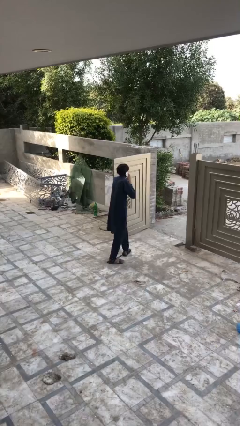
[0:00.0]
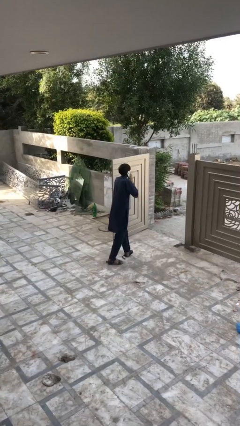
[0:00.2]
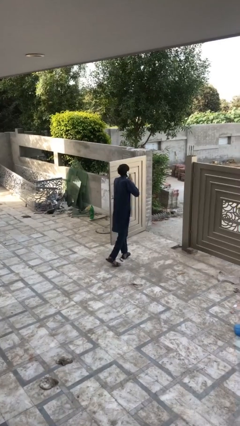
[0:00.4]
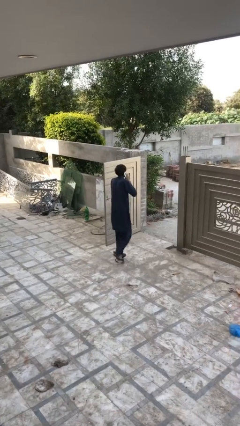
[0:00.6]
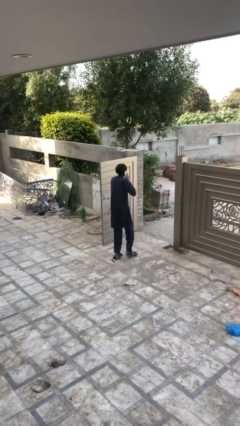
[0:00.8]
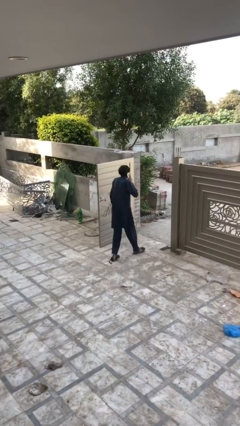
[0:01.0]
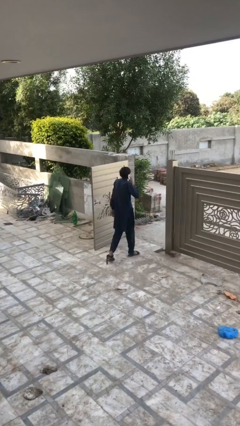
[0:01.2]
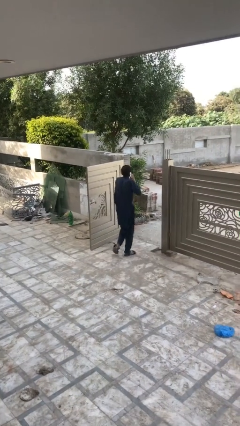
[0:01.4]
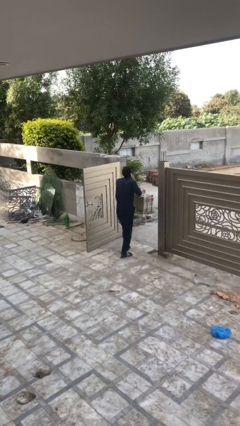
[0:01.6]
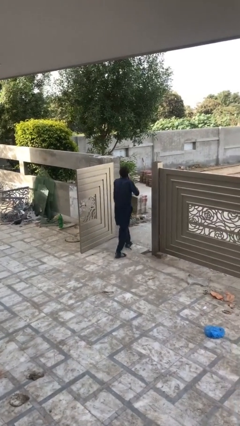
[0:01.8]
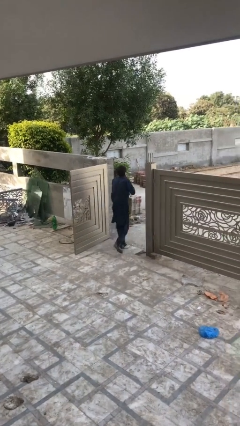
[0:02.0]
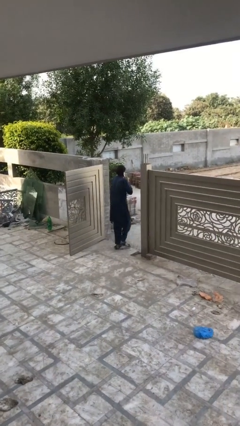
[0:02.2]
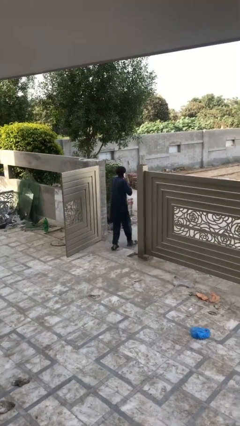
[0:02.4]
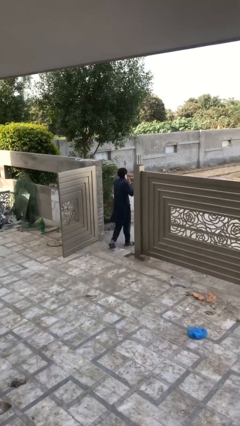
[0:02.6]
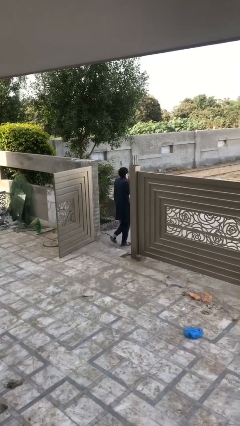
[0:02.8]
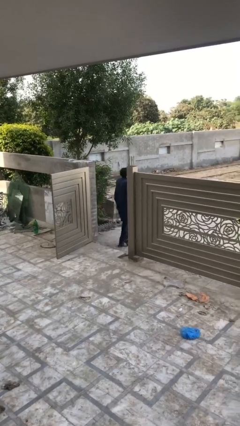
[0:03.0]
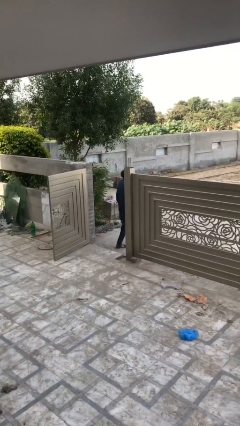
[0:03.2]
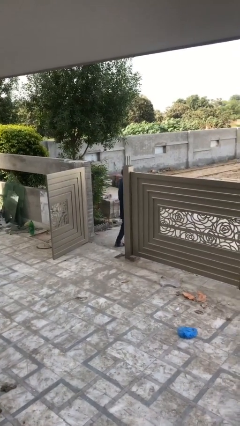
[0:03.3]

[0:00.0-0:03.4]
person exits scene through structure

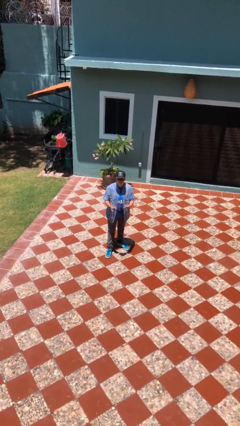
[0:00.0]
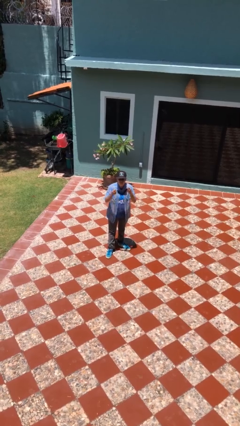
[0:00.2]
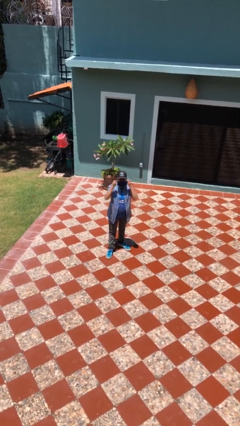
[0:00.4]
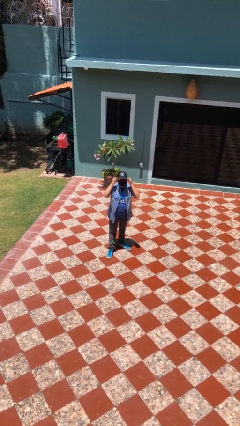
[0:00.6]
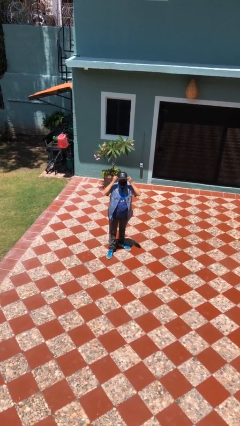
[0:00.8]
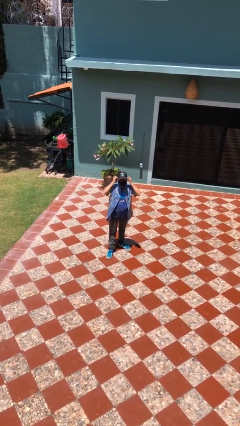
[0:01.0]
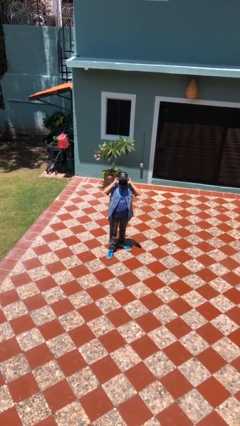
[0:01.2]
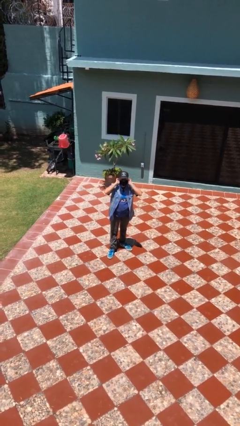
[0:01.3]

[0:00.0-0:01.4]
person puts on facemask

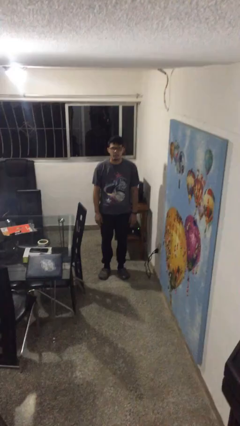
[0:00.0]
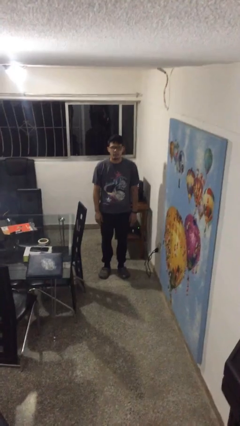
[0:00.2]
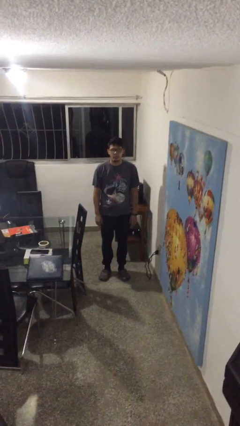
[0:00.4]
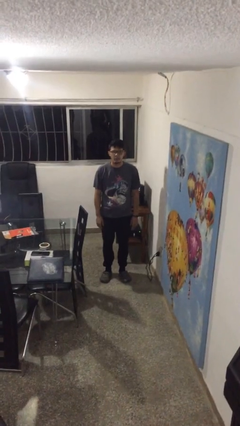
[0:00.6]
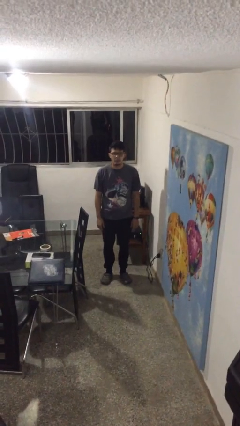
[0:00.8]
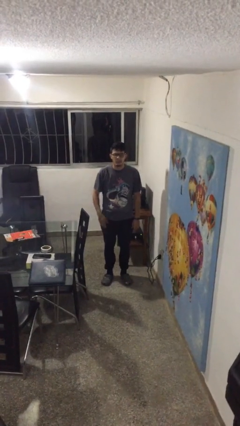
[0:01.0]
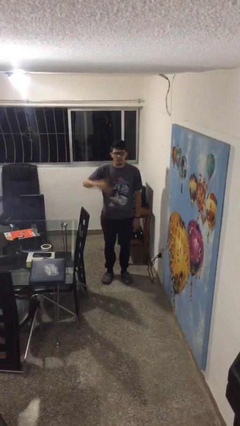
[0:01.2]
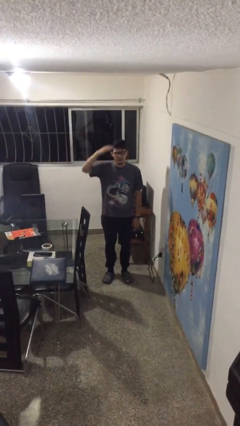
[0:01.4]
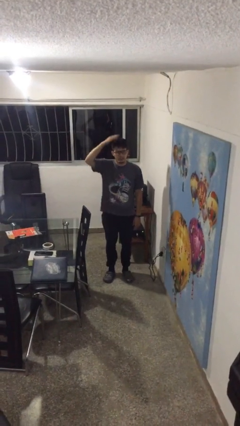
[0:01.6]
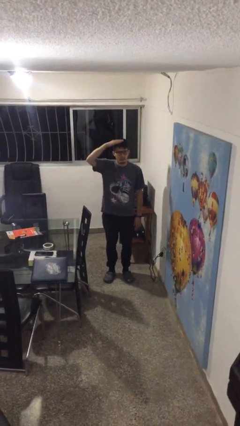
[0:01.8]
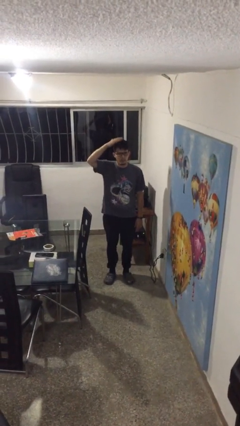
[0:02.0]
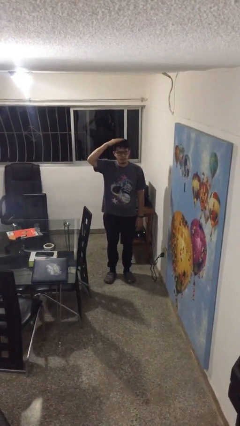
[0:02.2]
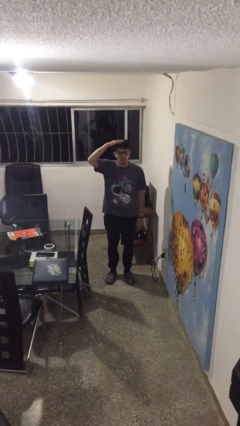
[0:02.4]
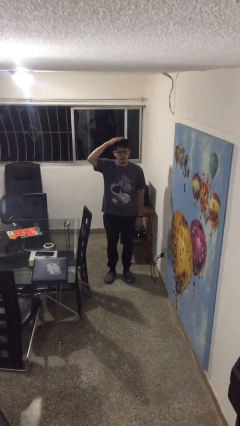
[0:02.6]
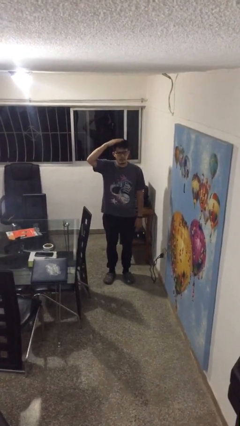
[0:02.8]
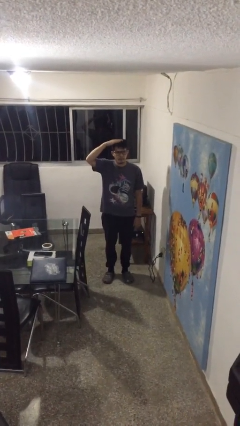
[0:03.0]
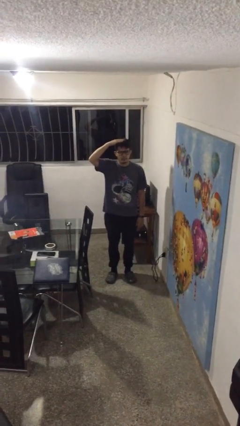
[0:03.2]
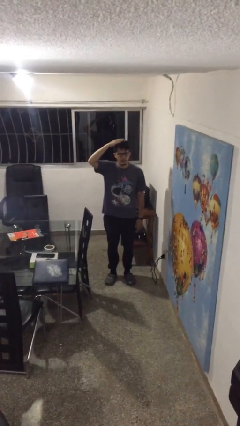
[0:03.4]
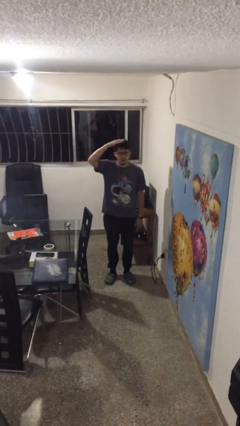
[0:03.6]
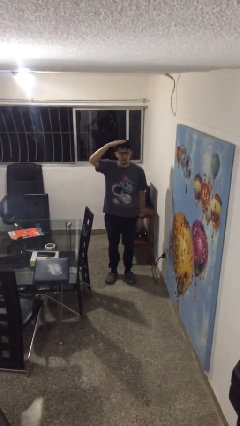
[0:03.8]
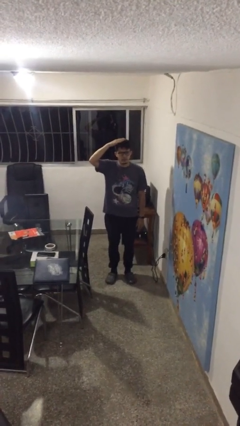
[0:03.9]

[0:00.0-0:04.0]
person pats head

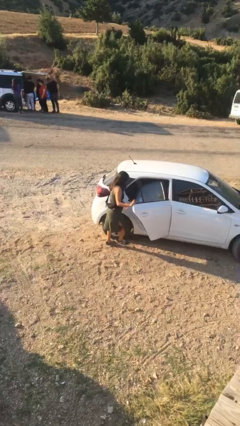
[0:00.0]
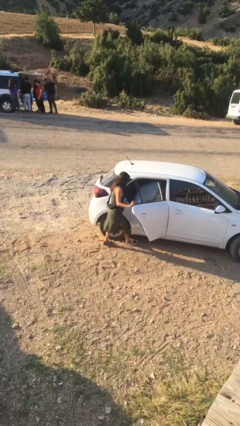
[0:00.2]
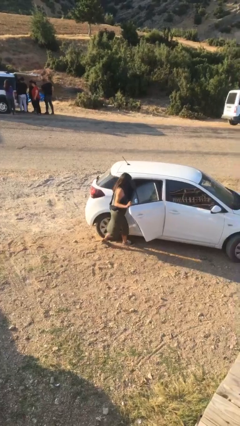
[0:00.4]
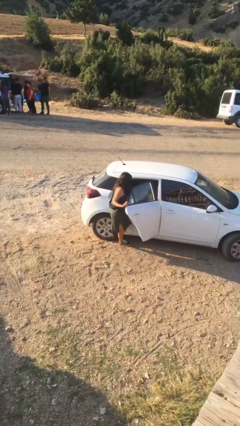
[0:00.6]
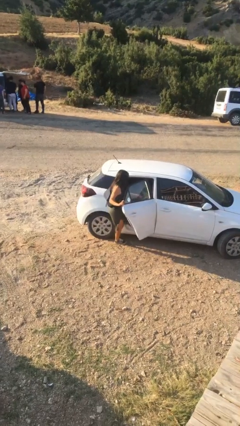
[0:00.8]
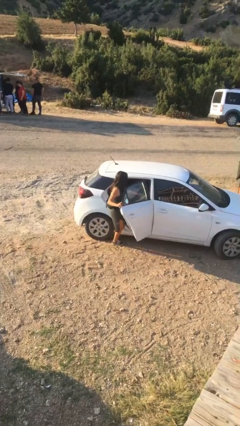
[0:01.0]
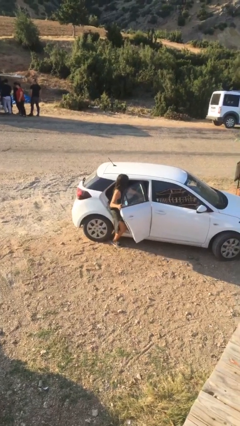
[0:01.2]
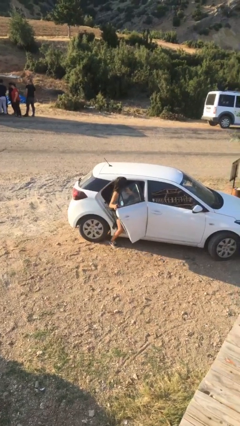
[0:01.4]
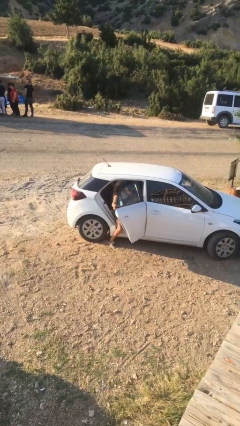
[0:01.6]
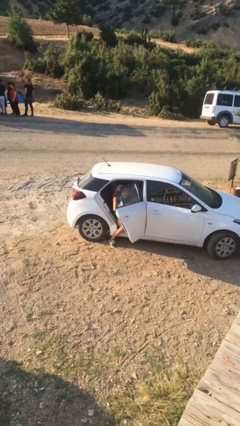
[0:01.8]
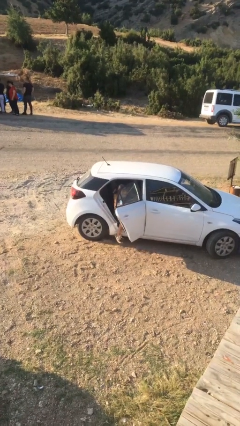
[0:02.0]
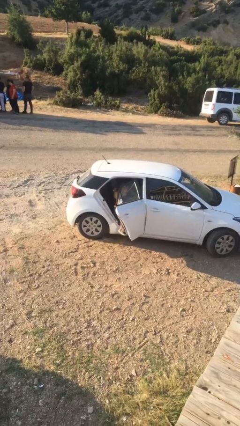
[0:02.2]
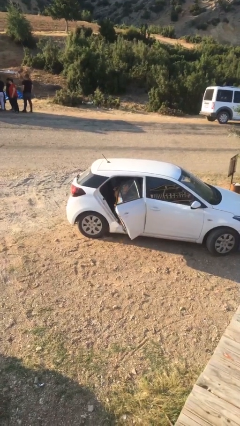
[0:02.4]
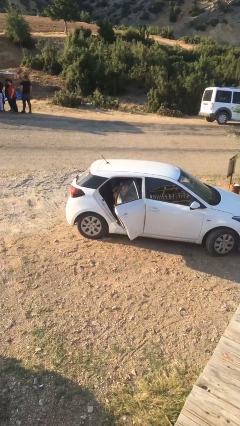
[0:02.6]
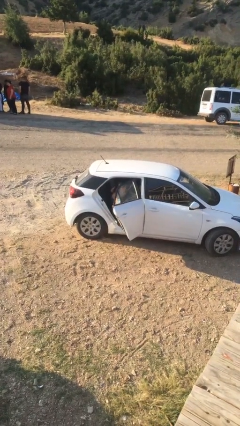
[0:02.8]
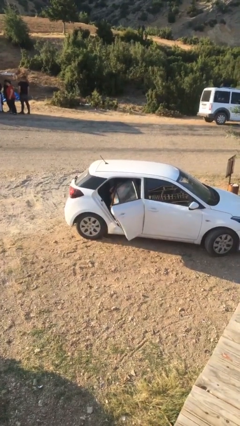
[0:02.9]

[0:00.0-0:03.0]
person enters car

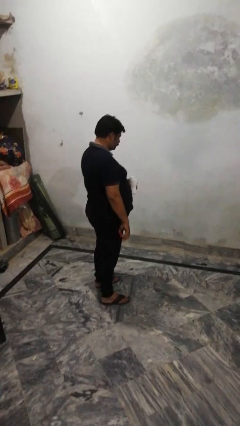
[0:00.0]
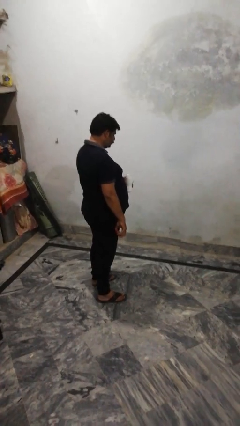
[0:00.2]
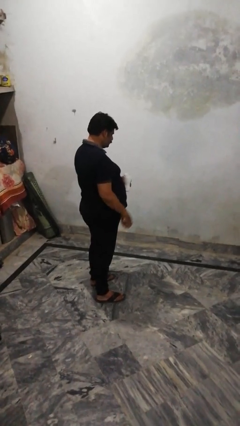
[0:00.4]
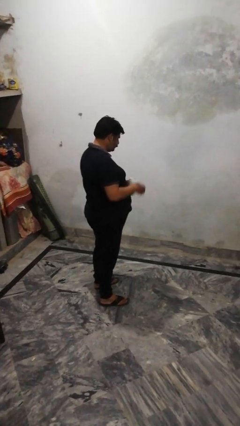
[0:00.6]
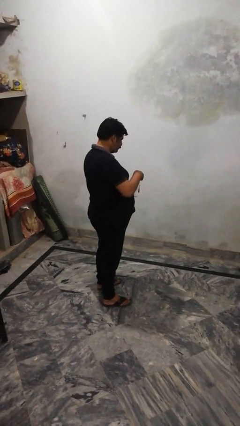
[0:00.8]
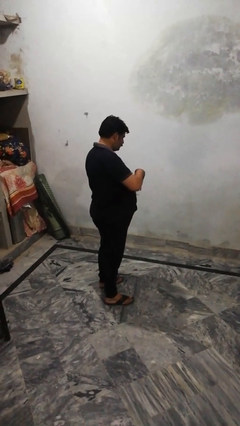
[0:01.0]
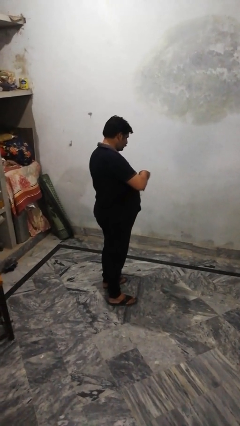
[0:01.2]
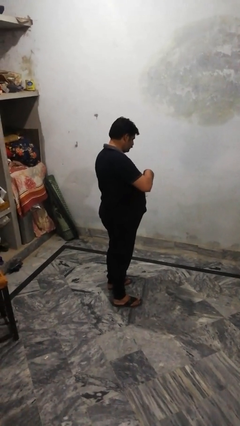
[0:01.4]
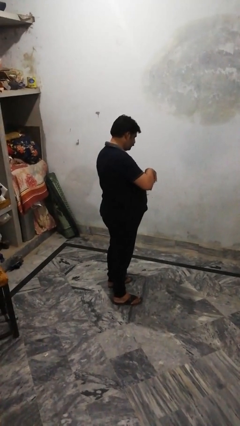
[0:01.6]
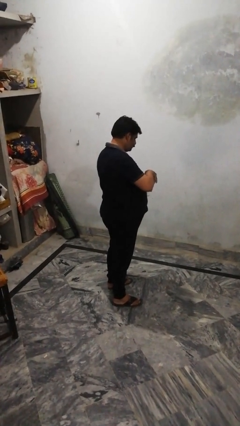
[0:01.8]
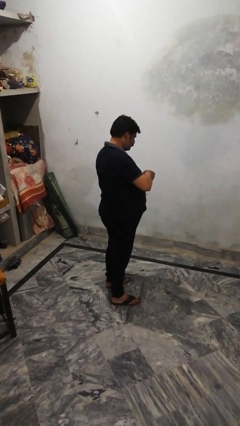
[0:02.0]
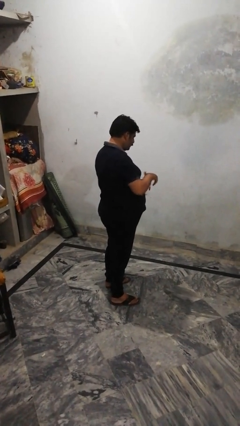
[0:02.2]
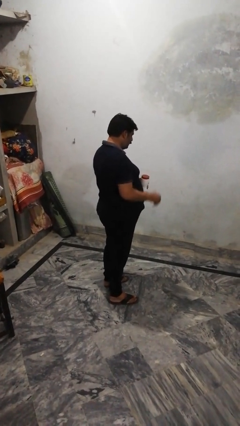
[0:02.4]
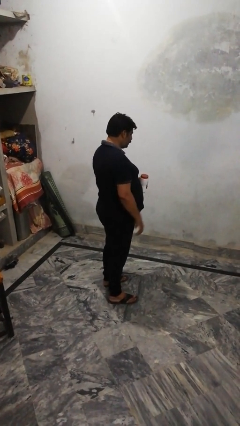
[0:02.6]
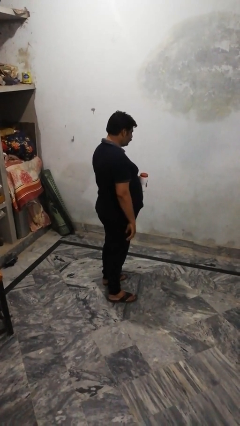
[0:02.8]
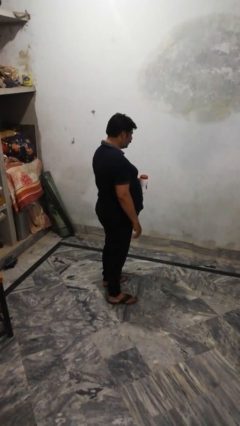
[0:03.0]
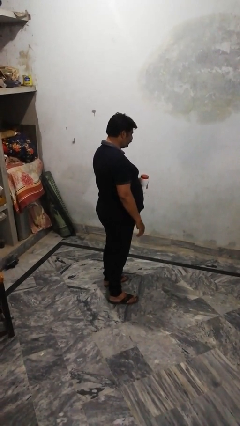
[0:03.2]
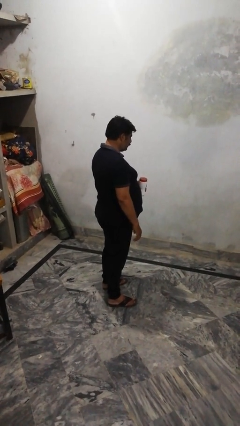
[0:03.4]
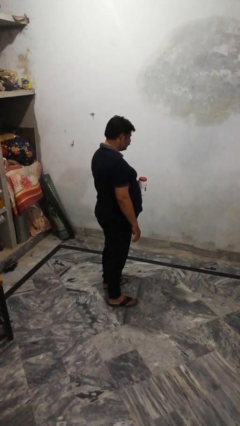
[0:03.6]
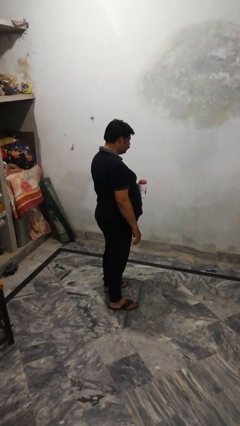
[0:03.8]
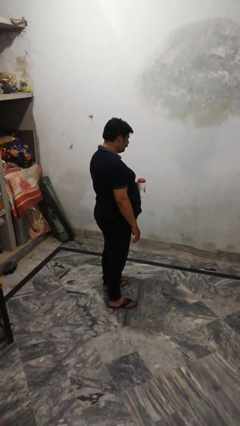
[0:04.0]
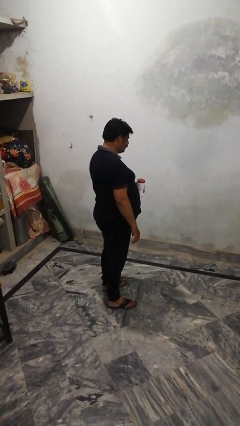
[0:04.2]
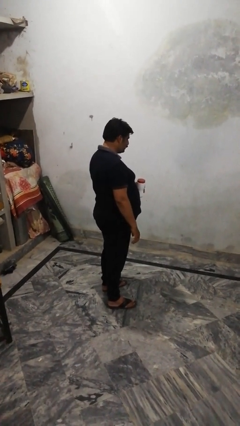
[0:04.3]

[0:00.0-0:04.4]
person closes jar

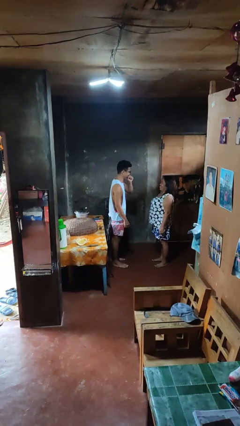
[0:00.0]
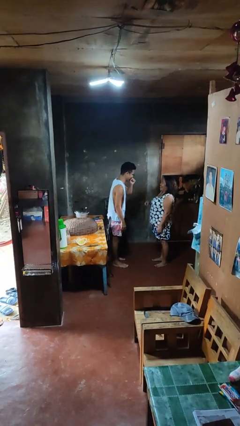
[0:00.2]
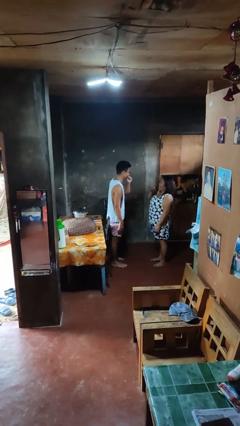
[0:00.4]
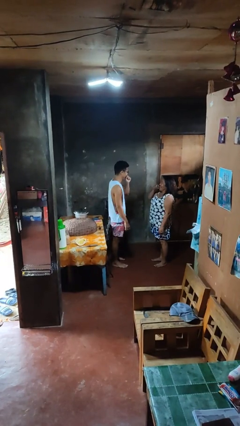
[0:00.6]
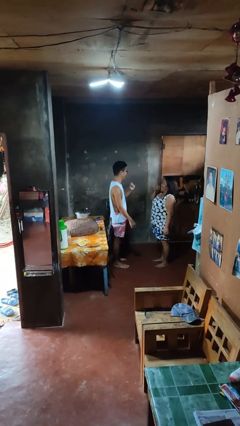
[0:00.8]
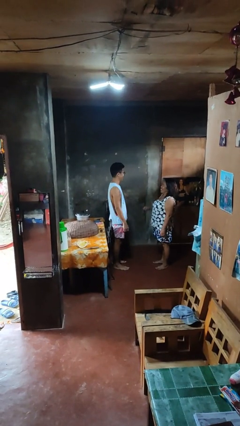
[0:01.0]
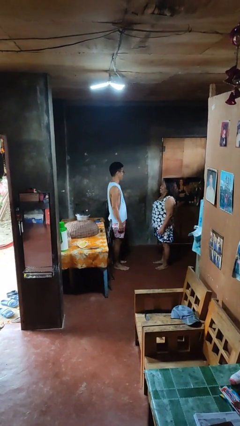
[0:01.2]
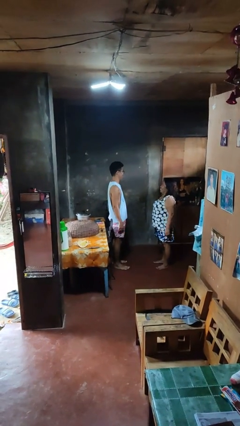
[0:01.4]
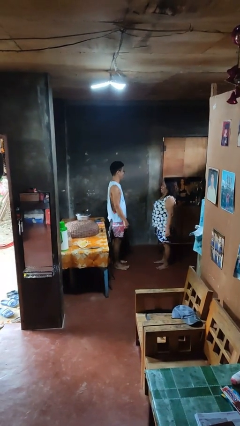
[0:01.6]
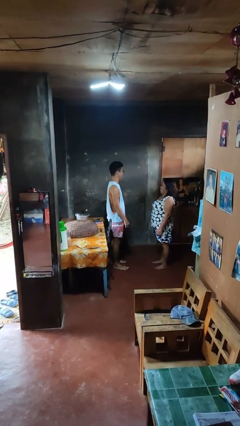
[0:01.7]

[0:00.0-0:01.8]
person laughs with person
